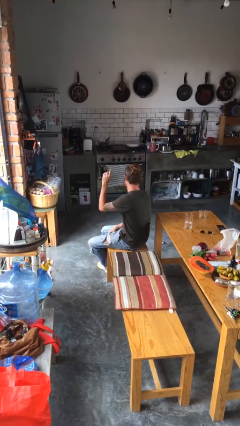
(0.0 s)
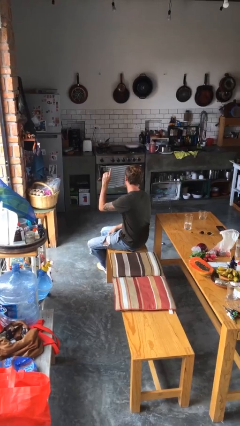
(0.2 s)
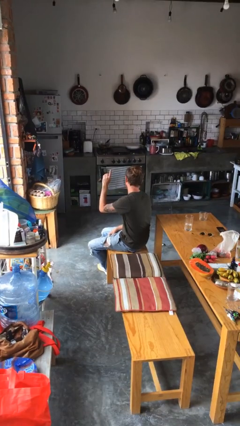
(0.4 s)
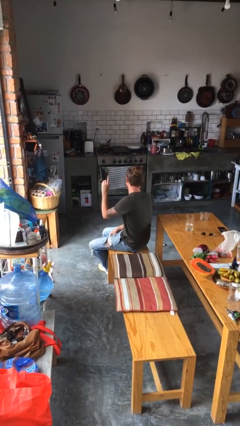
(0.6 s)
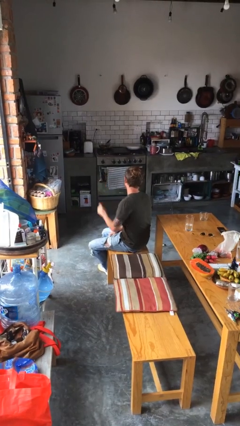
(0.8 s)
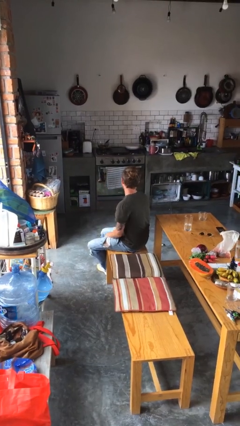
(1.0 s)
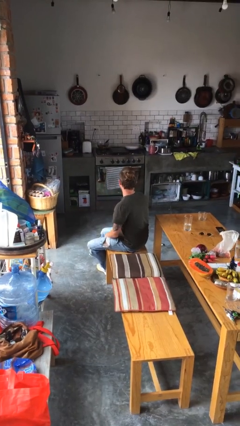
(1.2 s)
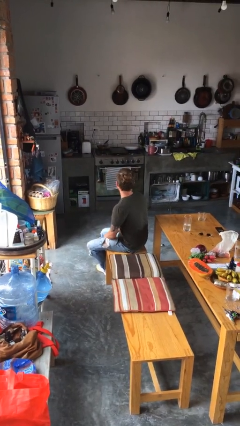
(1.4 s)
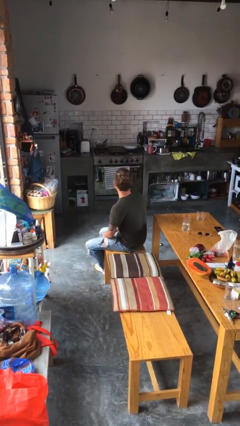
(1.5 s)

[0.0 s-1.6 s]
person gestures lower hand

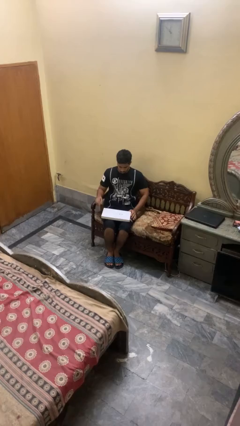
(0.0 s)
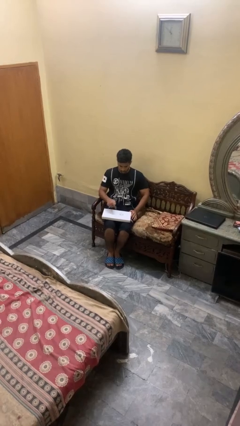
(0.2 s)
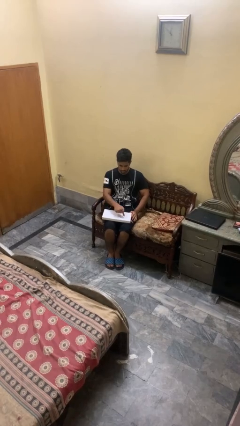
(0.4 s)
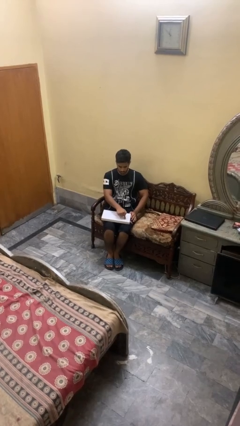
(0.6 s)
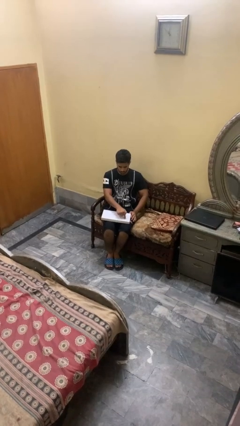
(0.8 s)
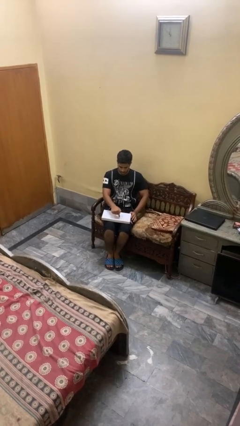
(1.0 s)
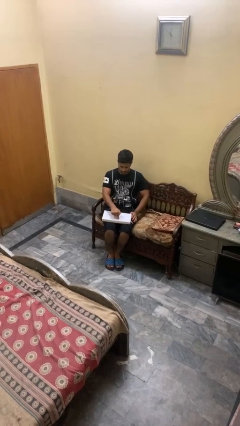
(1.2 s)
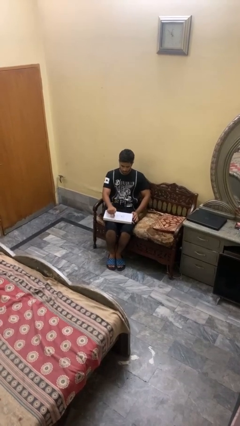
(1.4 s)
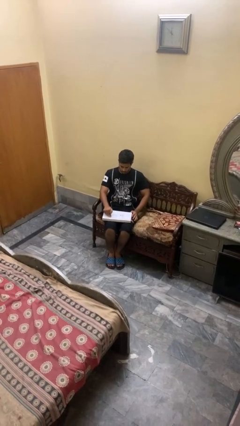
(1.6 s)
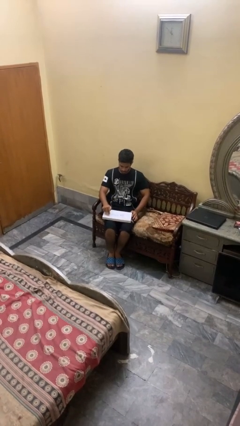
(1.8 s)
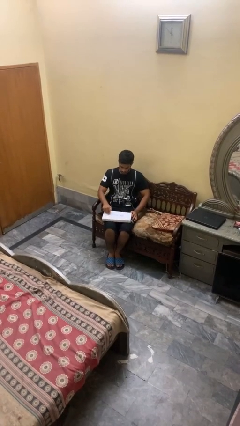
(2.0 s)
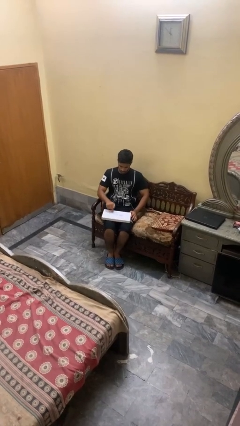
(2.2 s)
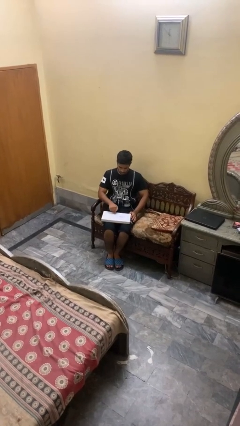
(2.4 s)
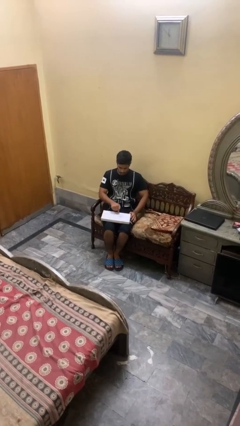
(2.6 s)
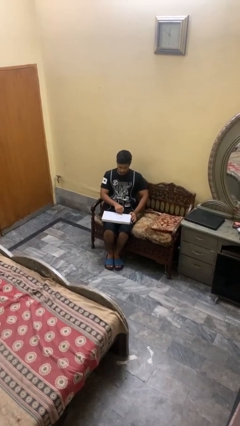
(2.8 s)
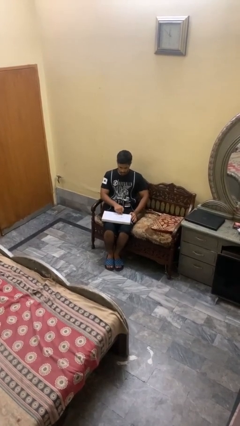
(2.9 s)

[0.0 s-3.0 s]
person taps object with finger

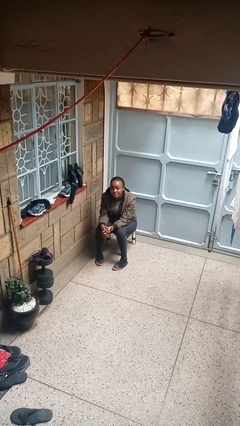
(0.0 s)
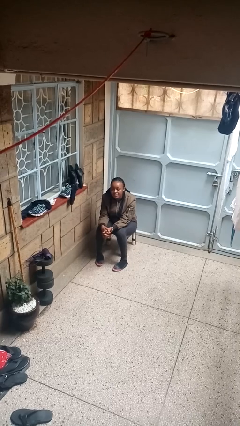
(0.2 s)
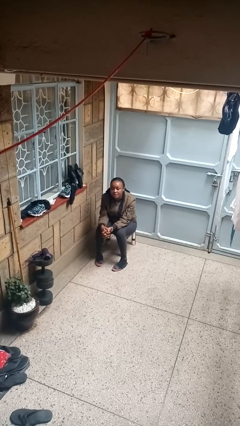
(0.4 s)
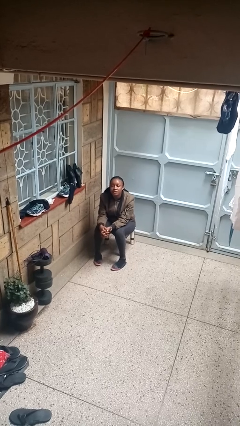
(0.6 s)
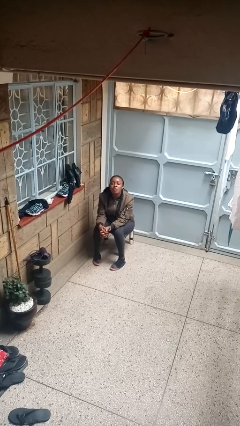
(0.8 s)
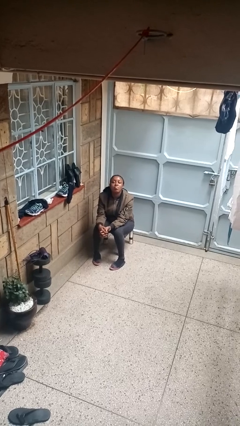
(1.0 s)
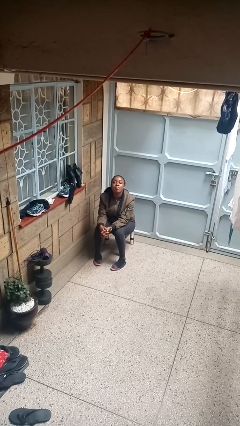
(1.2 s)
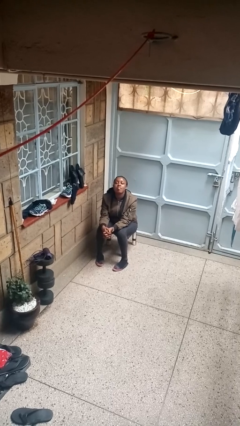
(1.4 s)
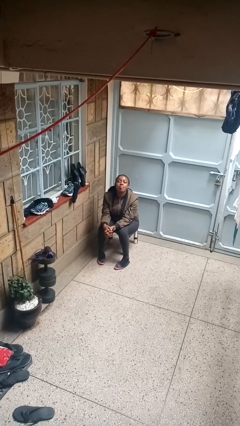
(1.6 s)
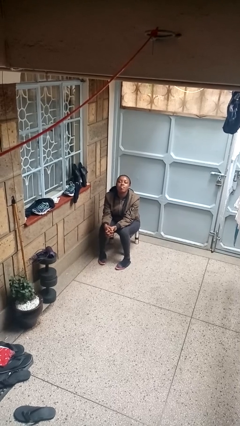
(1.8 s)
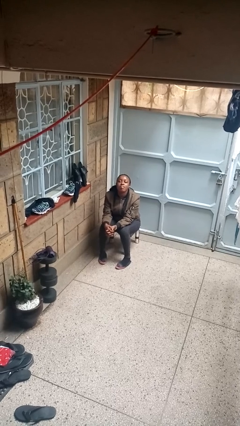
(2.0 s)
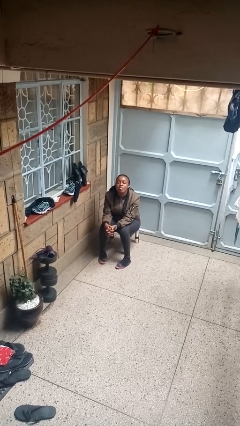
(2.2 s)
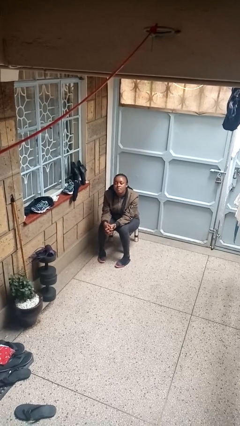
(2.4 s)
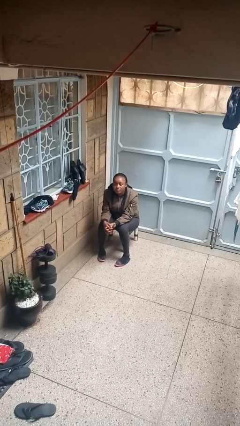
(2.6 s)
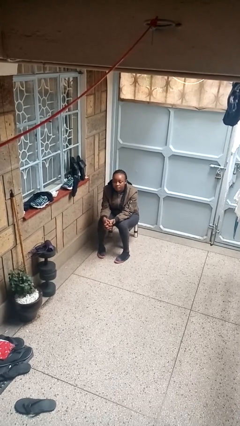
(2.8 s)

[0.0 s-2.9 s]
person sticks out tongue

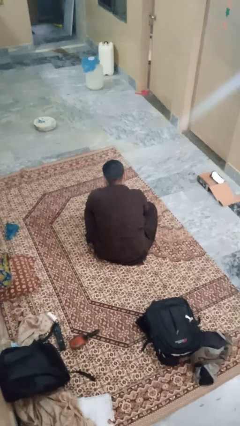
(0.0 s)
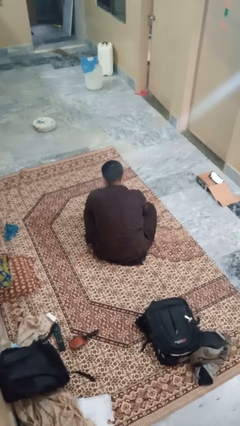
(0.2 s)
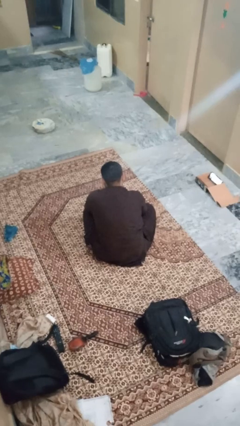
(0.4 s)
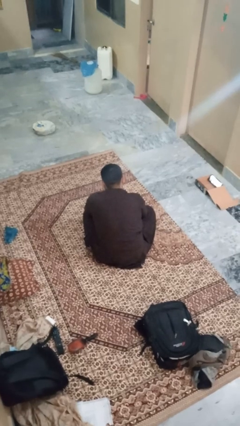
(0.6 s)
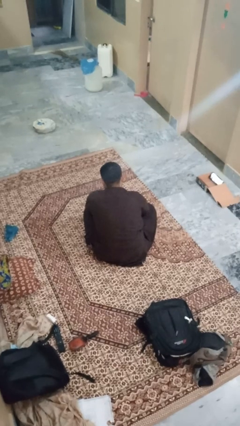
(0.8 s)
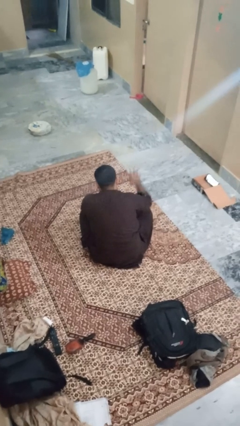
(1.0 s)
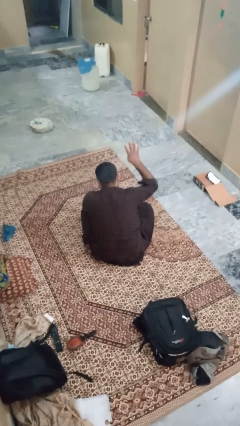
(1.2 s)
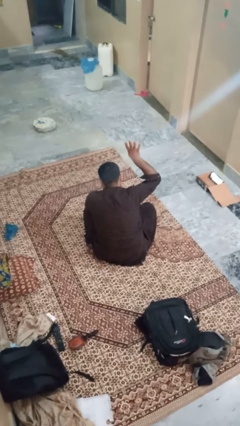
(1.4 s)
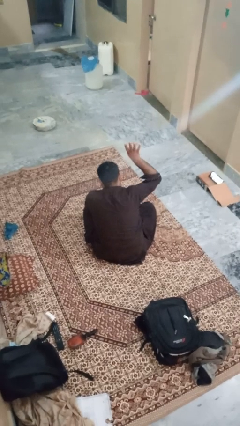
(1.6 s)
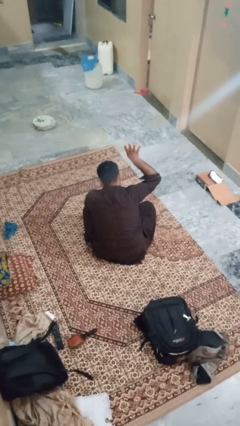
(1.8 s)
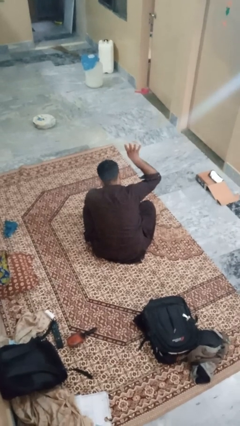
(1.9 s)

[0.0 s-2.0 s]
person gestures number four

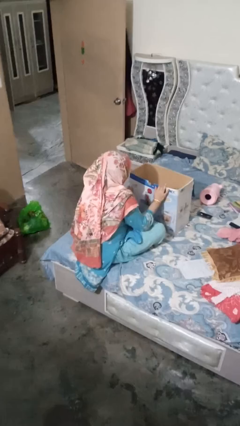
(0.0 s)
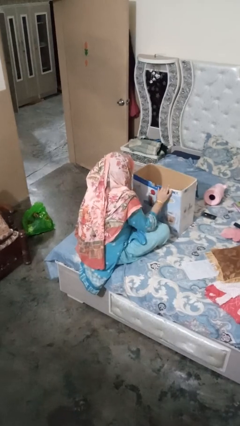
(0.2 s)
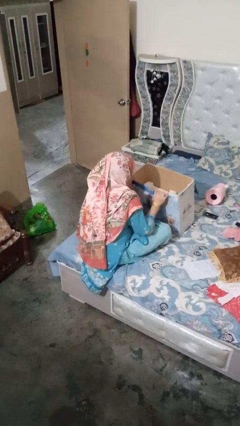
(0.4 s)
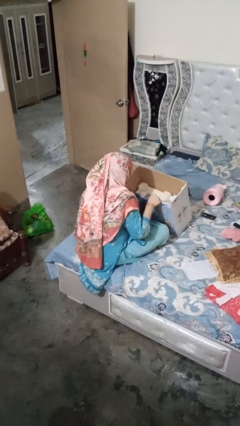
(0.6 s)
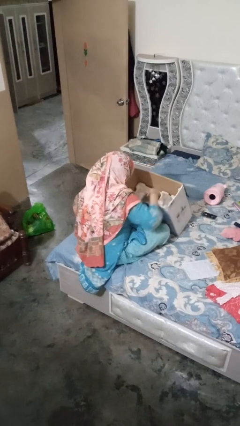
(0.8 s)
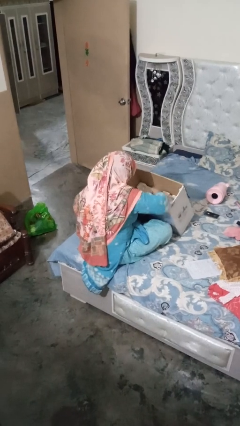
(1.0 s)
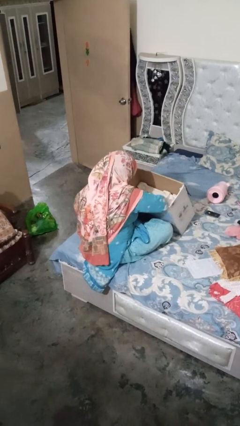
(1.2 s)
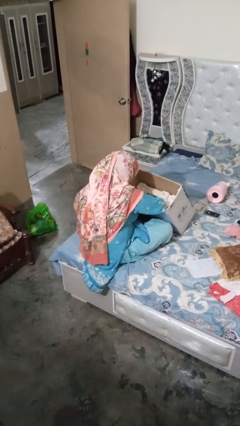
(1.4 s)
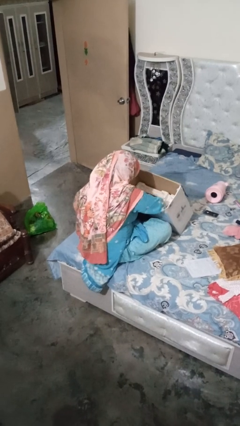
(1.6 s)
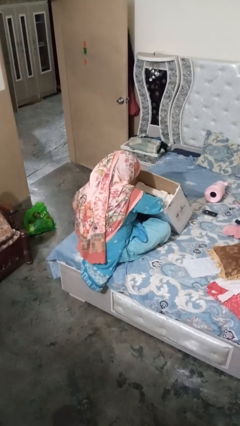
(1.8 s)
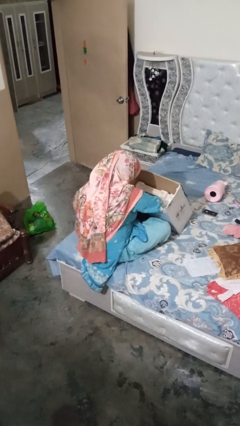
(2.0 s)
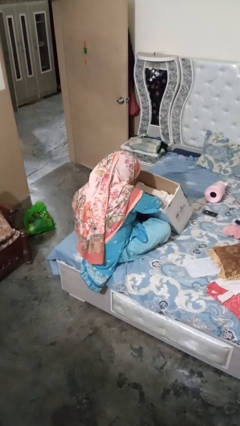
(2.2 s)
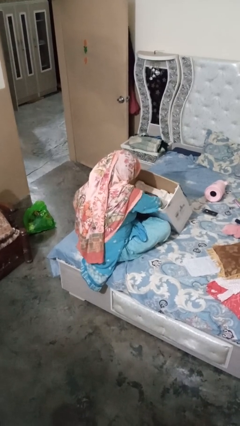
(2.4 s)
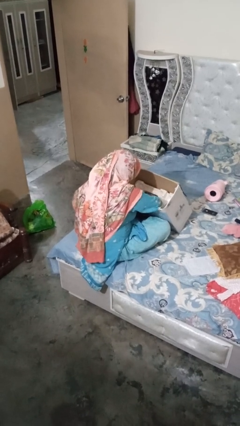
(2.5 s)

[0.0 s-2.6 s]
person searches in box

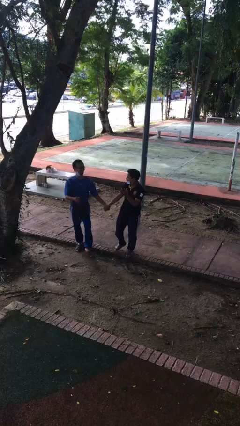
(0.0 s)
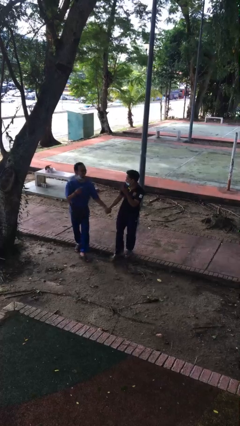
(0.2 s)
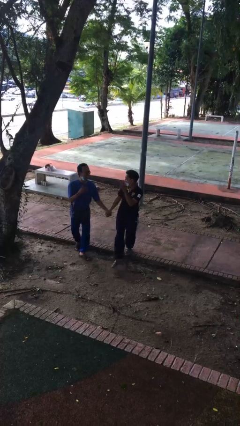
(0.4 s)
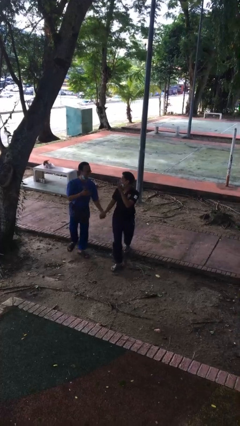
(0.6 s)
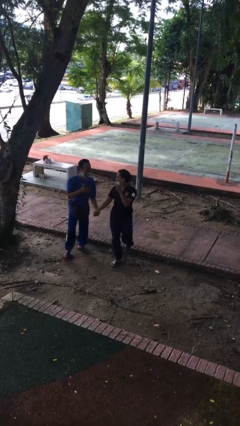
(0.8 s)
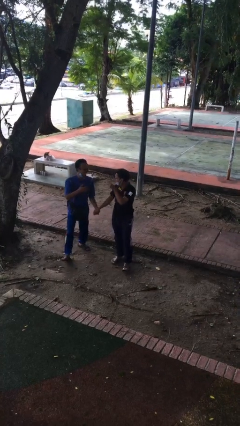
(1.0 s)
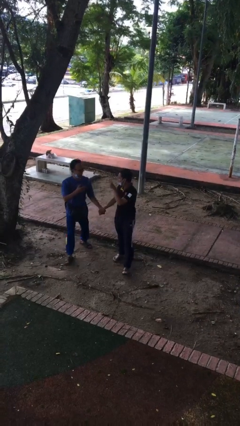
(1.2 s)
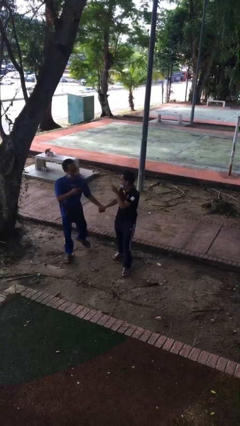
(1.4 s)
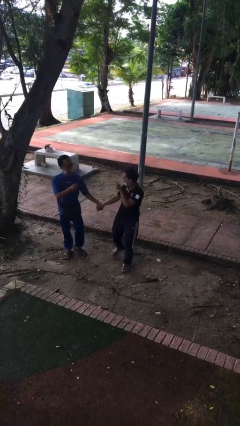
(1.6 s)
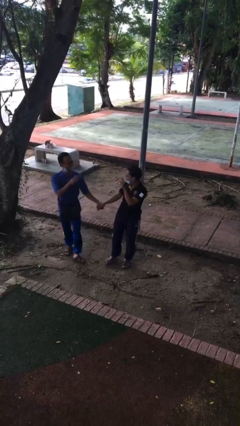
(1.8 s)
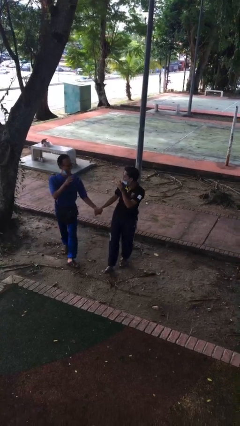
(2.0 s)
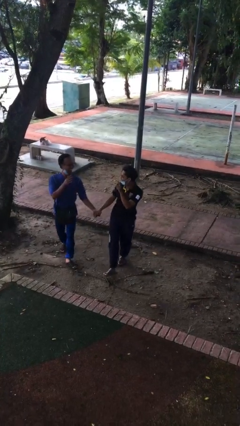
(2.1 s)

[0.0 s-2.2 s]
person holds hand

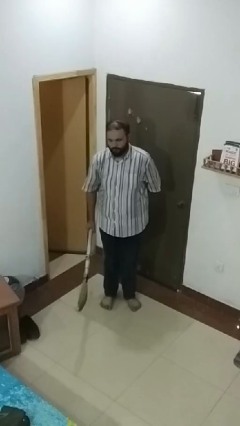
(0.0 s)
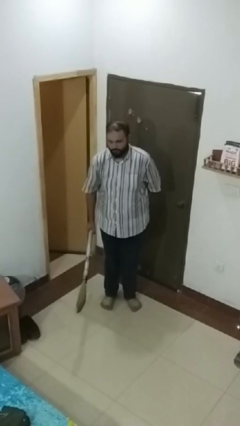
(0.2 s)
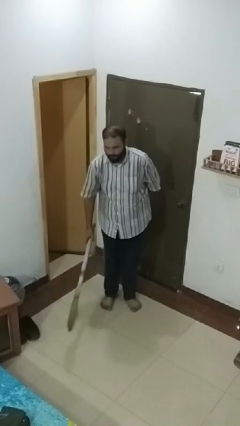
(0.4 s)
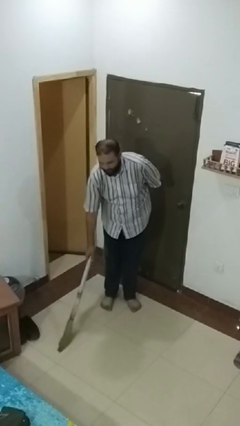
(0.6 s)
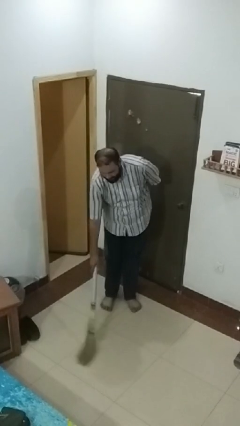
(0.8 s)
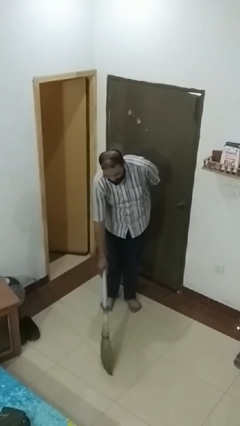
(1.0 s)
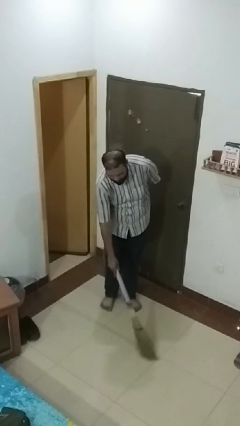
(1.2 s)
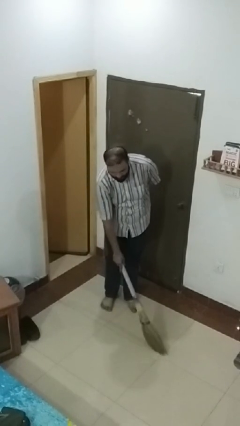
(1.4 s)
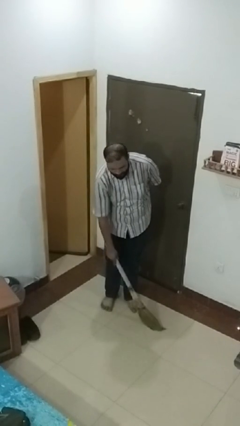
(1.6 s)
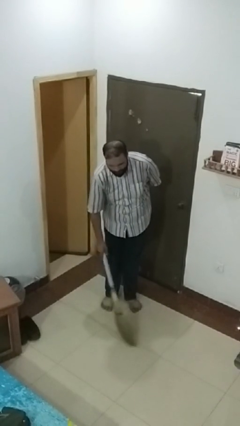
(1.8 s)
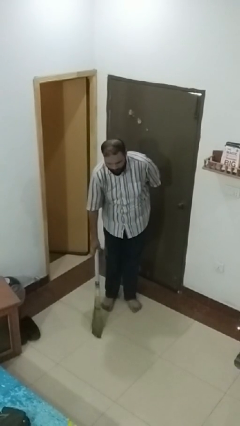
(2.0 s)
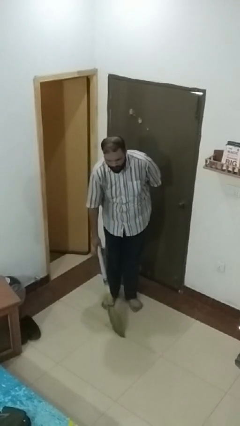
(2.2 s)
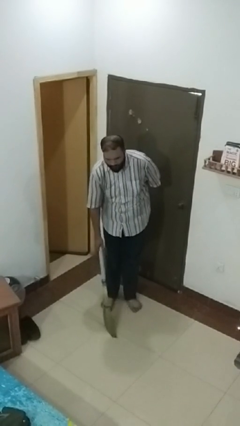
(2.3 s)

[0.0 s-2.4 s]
person sweeps floor

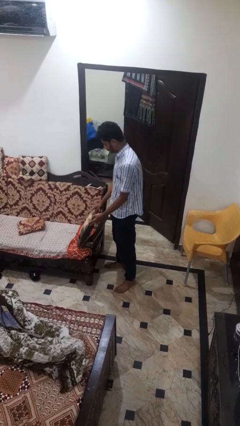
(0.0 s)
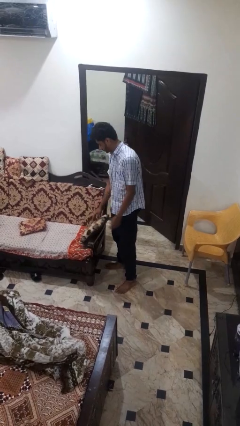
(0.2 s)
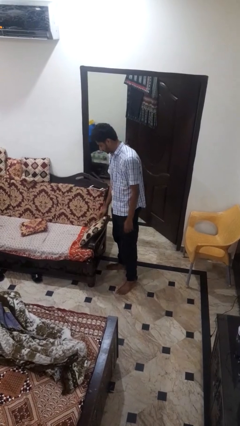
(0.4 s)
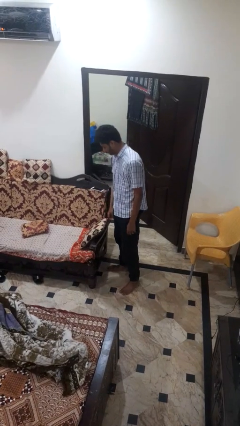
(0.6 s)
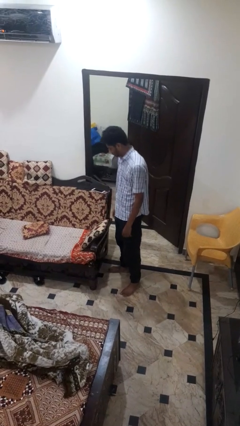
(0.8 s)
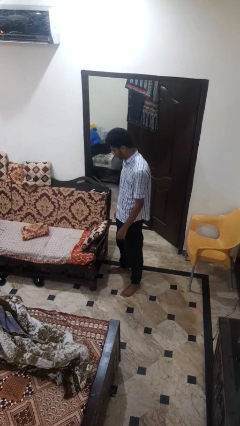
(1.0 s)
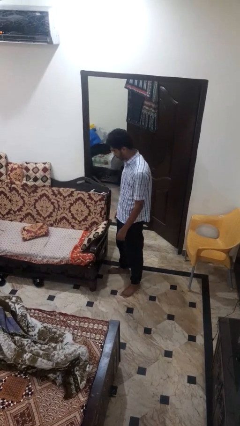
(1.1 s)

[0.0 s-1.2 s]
person puts down object on couch
